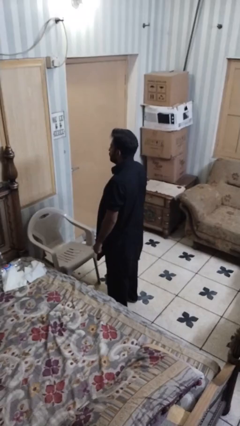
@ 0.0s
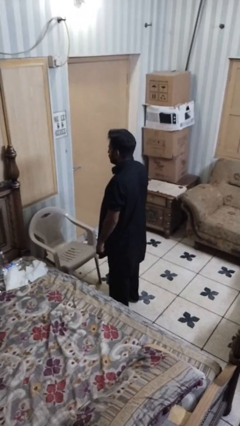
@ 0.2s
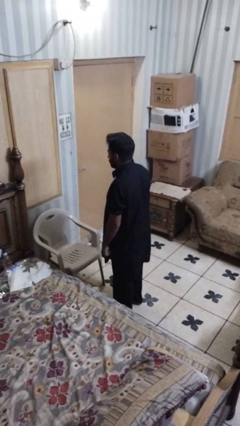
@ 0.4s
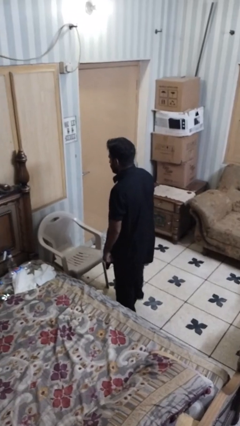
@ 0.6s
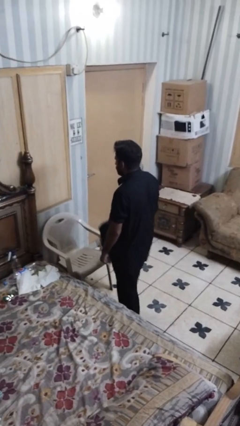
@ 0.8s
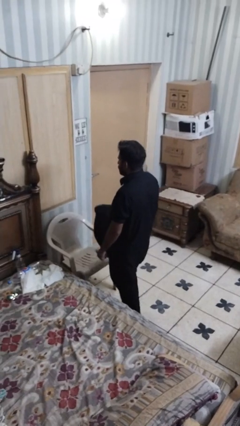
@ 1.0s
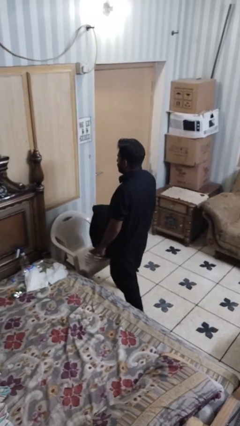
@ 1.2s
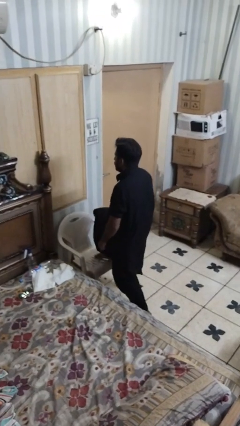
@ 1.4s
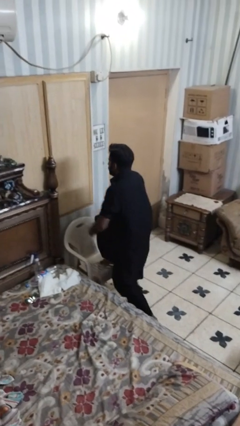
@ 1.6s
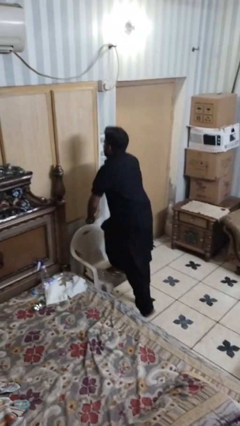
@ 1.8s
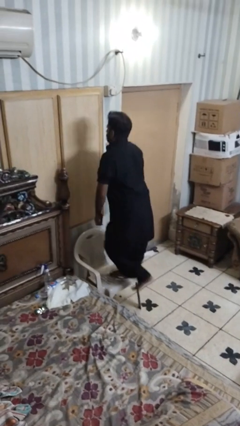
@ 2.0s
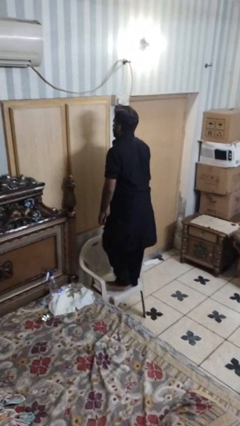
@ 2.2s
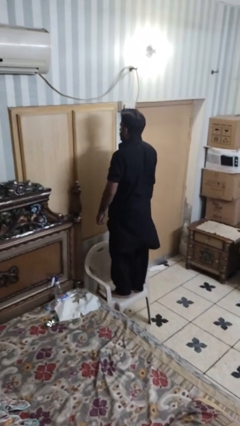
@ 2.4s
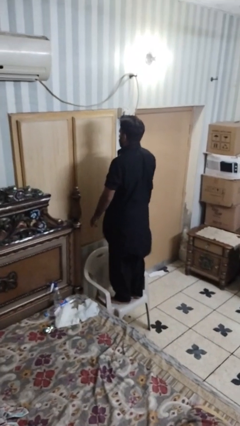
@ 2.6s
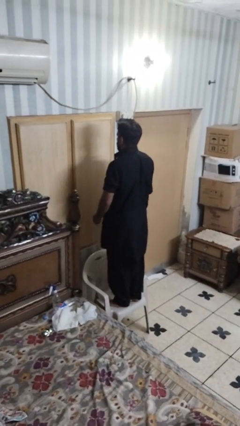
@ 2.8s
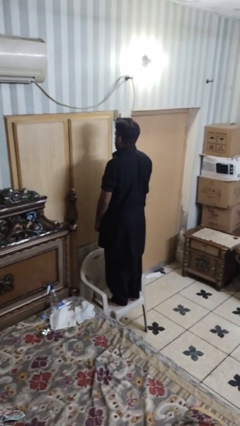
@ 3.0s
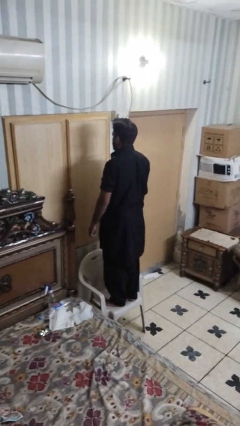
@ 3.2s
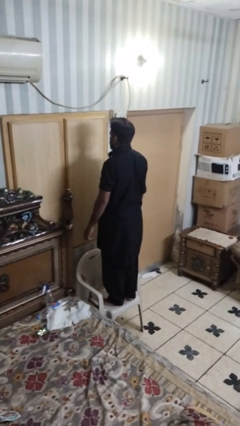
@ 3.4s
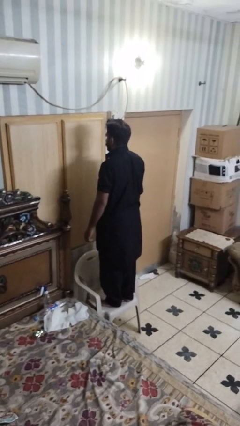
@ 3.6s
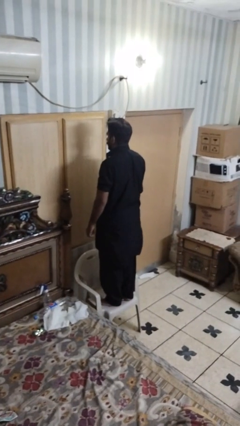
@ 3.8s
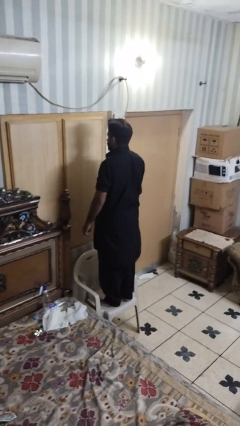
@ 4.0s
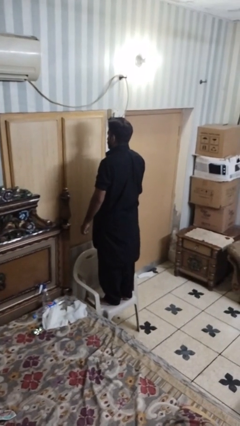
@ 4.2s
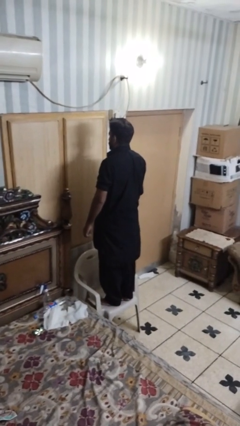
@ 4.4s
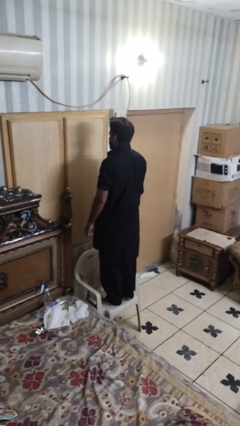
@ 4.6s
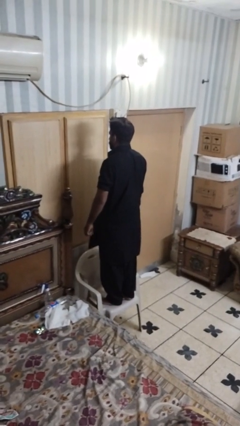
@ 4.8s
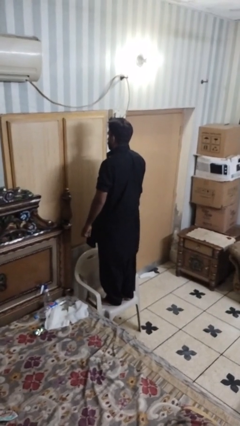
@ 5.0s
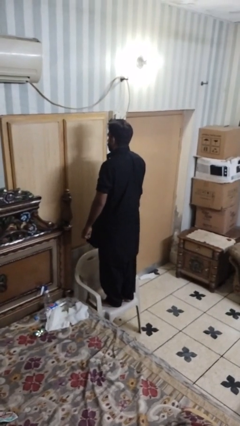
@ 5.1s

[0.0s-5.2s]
person climbs on chair

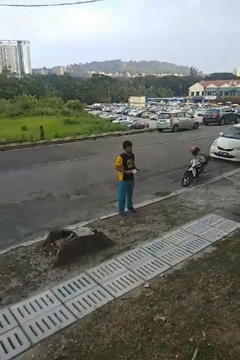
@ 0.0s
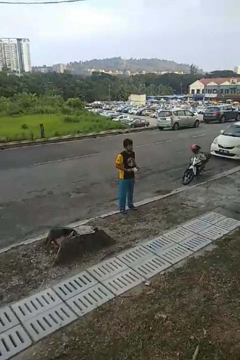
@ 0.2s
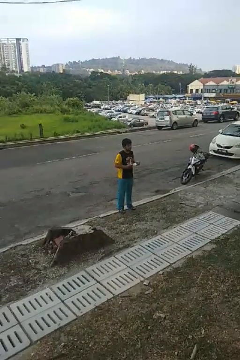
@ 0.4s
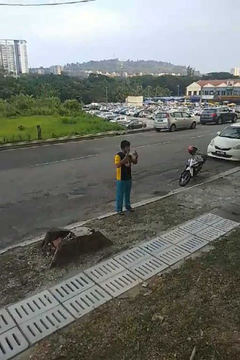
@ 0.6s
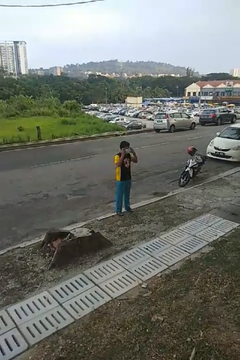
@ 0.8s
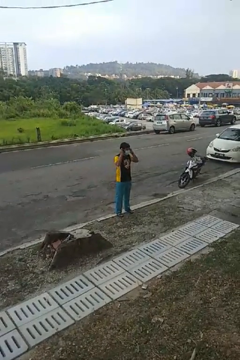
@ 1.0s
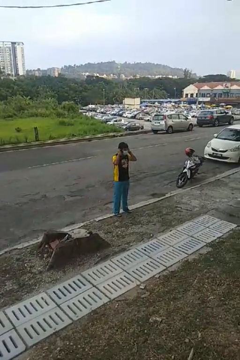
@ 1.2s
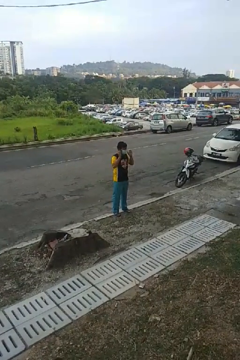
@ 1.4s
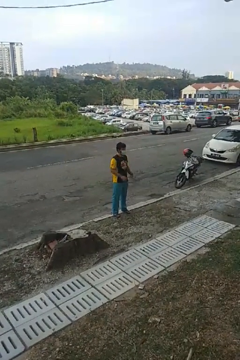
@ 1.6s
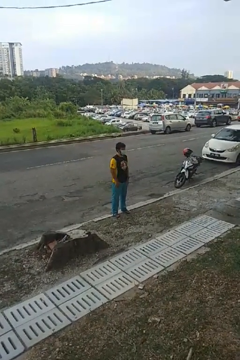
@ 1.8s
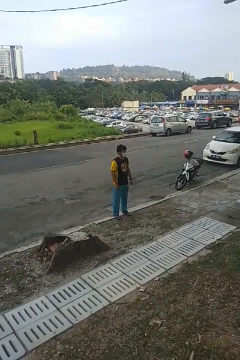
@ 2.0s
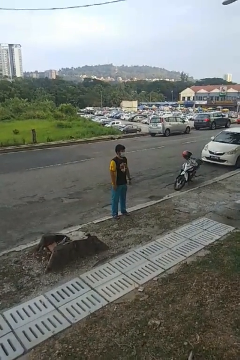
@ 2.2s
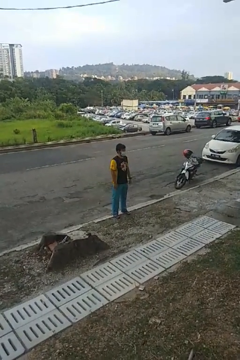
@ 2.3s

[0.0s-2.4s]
person puts on facemask

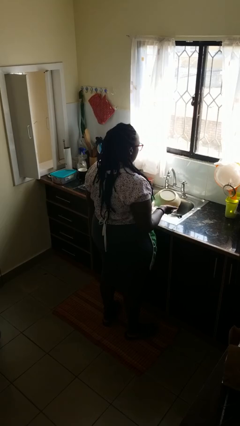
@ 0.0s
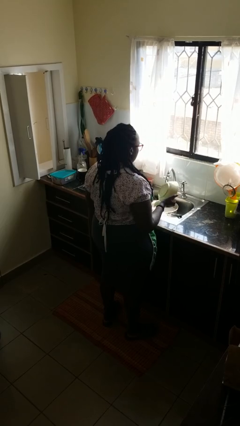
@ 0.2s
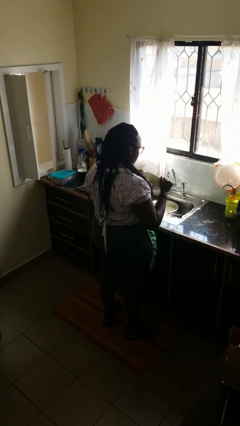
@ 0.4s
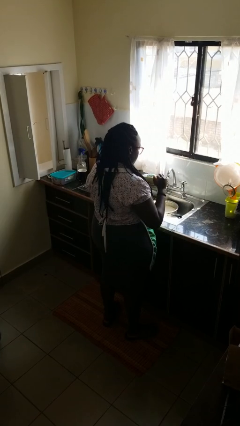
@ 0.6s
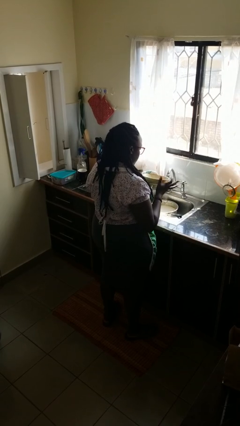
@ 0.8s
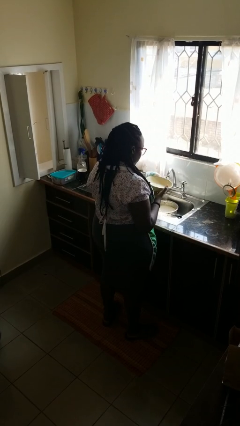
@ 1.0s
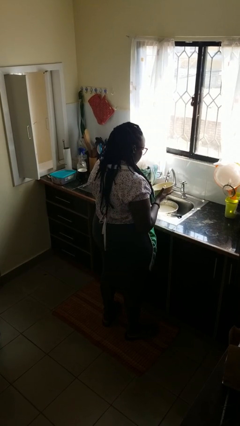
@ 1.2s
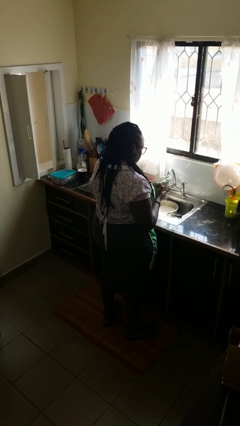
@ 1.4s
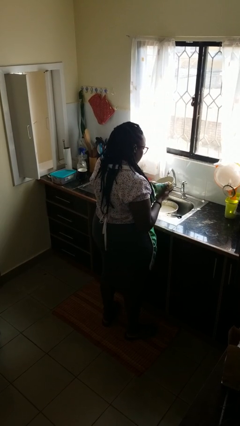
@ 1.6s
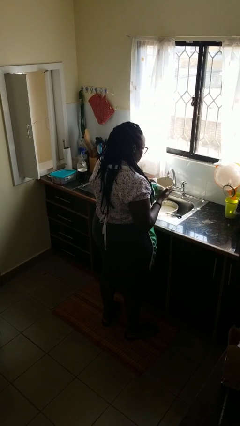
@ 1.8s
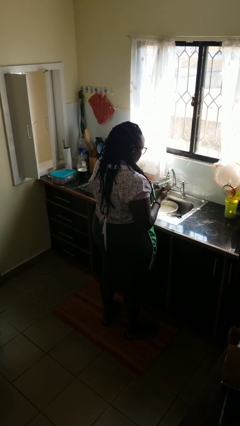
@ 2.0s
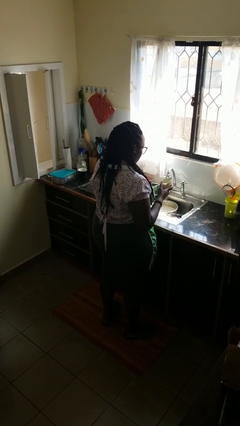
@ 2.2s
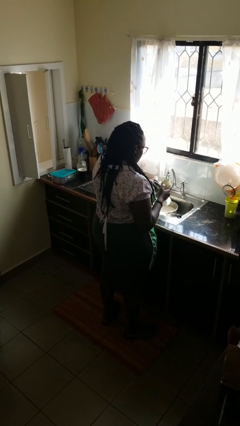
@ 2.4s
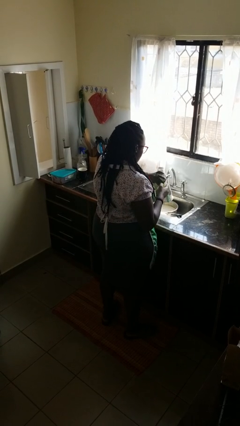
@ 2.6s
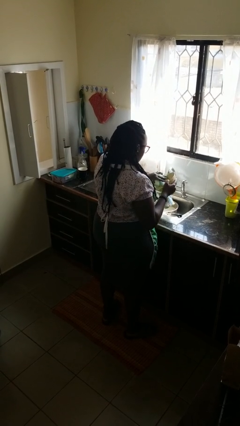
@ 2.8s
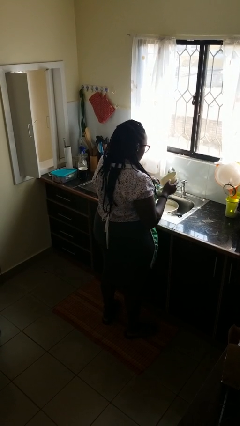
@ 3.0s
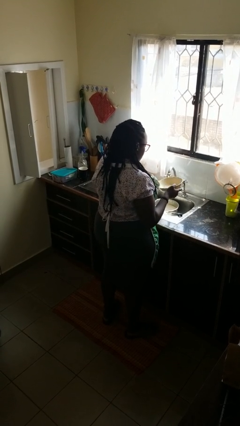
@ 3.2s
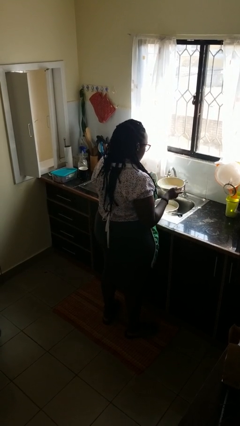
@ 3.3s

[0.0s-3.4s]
person dries dish

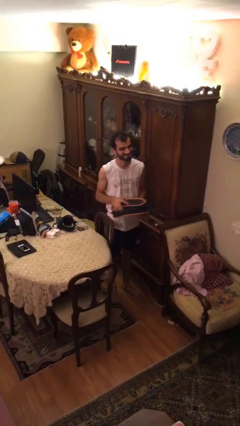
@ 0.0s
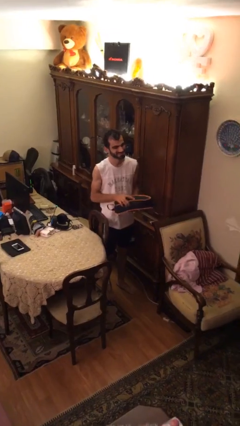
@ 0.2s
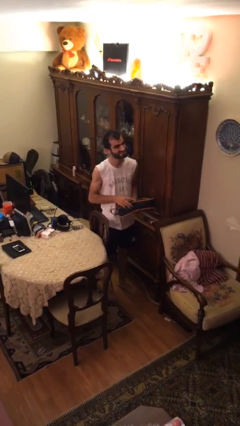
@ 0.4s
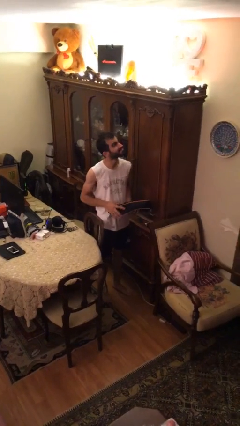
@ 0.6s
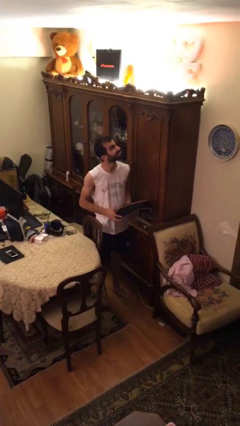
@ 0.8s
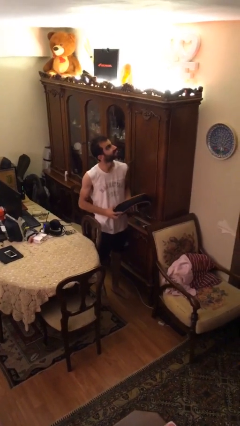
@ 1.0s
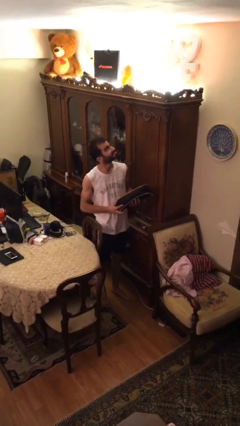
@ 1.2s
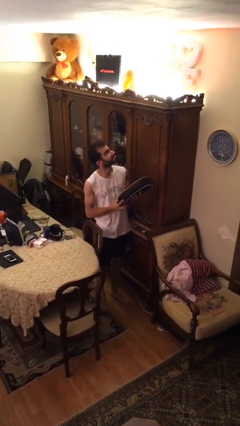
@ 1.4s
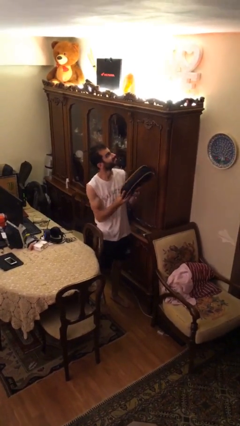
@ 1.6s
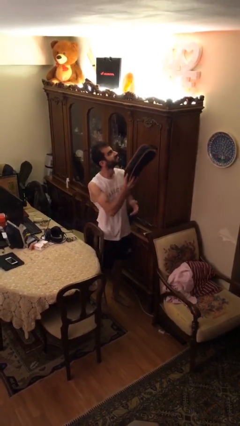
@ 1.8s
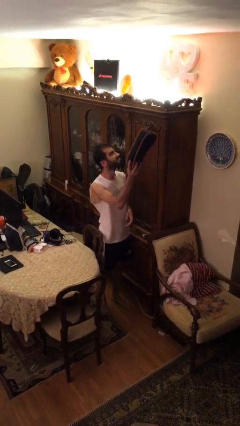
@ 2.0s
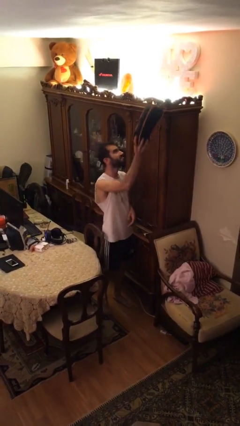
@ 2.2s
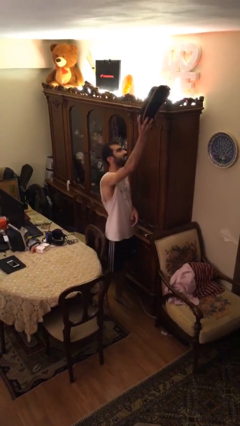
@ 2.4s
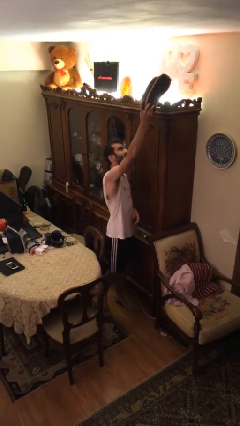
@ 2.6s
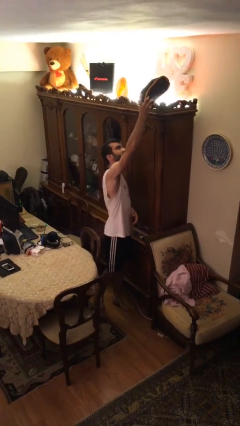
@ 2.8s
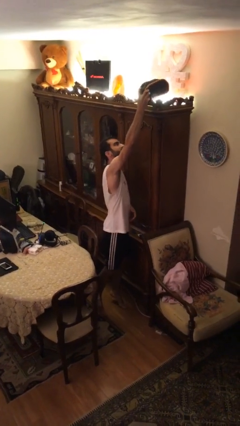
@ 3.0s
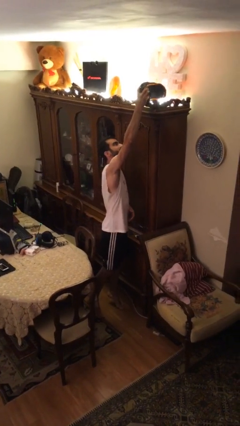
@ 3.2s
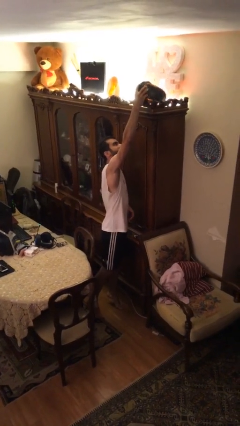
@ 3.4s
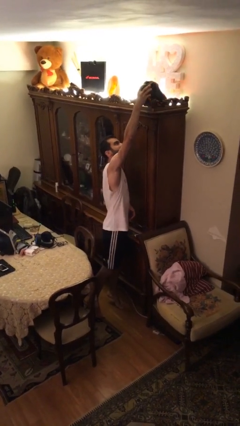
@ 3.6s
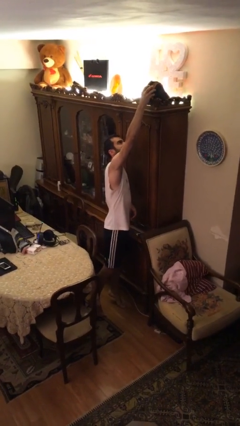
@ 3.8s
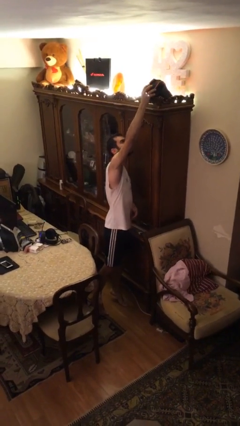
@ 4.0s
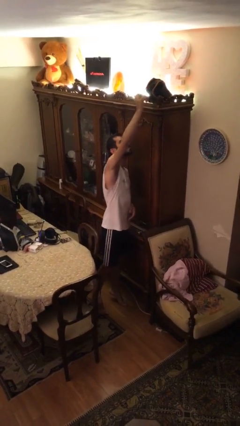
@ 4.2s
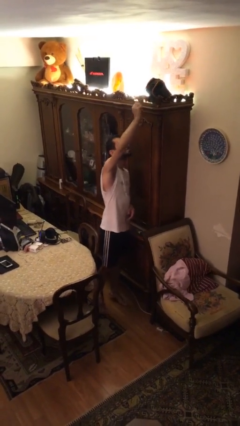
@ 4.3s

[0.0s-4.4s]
person puts down object on shelf

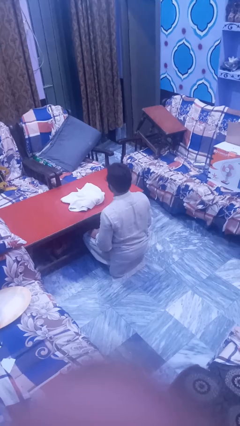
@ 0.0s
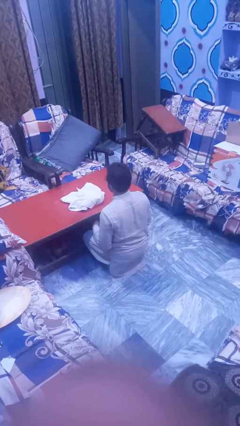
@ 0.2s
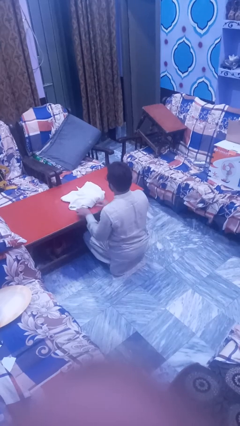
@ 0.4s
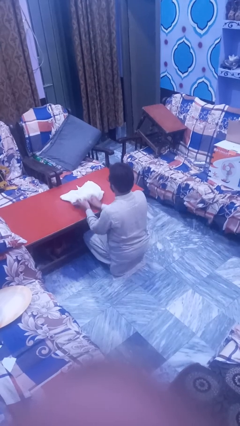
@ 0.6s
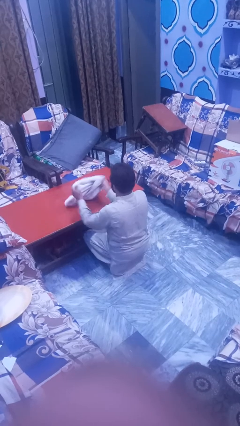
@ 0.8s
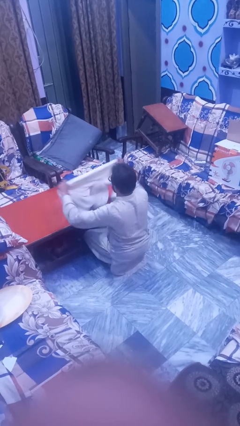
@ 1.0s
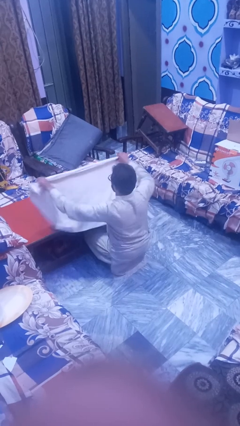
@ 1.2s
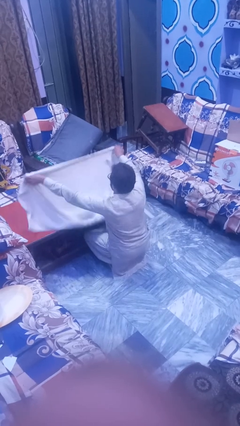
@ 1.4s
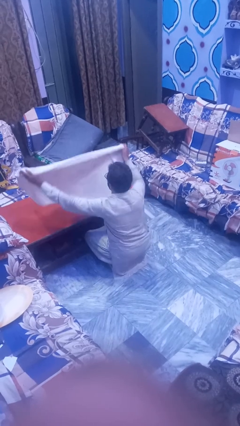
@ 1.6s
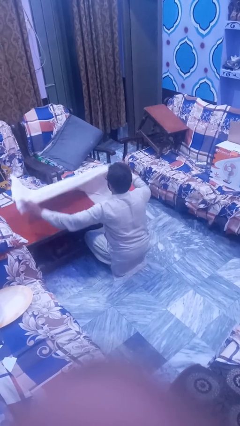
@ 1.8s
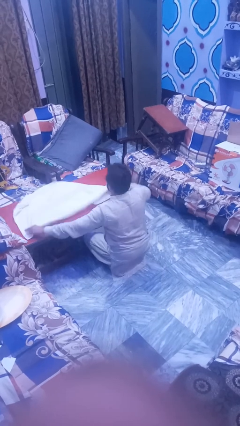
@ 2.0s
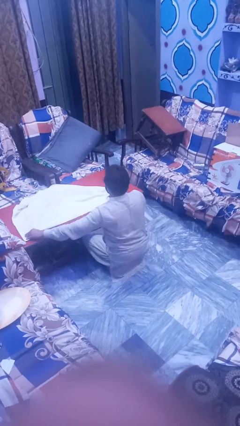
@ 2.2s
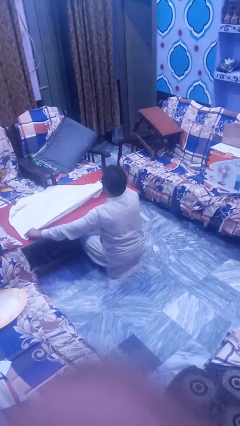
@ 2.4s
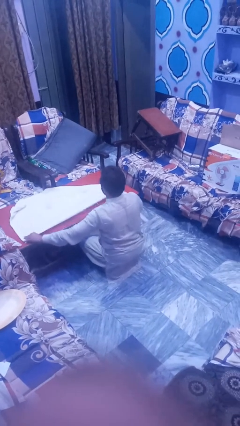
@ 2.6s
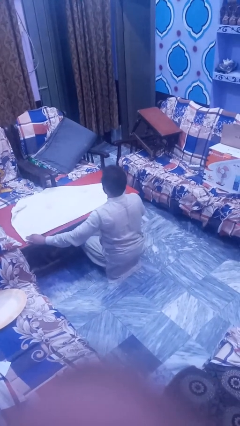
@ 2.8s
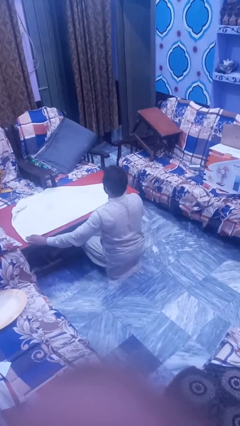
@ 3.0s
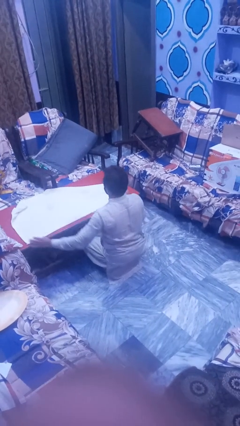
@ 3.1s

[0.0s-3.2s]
person spreads tablecloth
